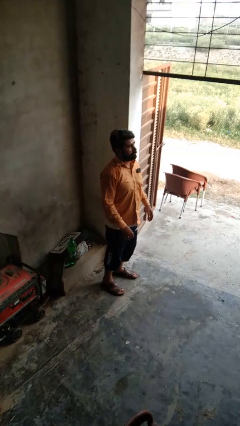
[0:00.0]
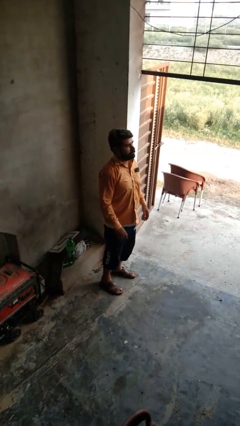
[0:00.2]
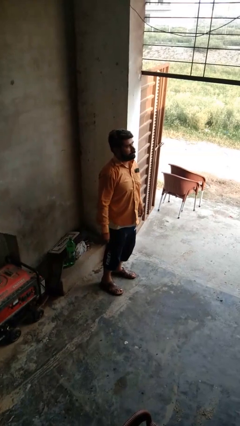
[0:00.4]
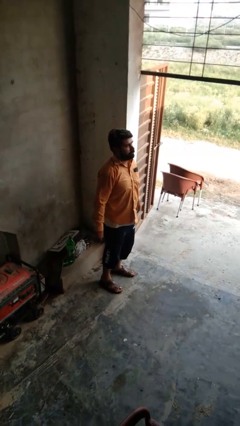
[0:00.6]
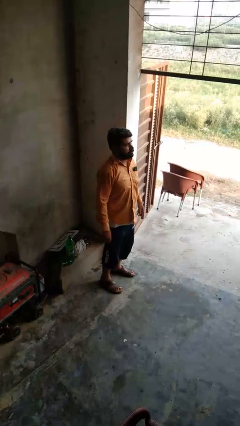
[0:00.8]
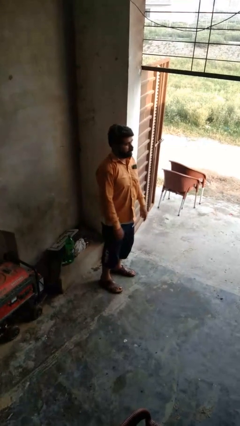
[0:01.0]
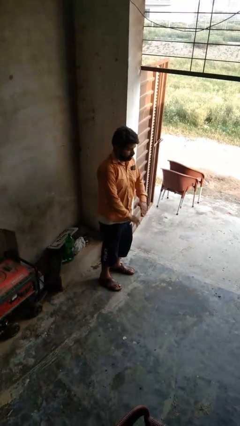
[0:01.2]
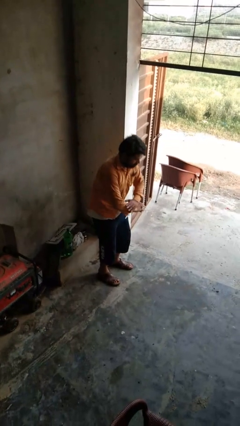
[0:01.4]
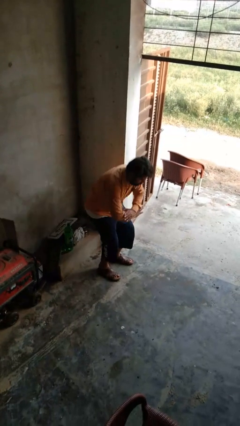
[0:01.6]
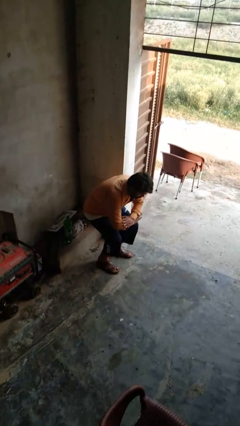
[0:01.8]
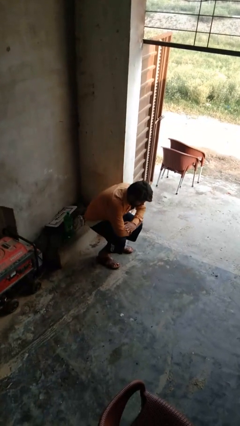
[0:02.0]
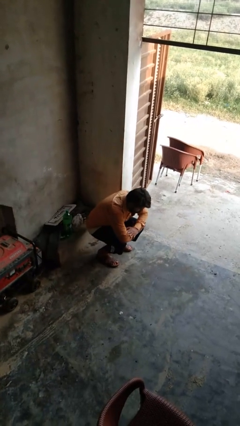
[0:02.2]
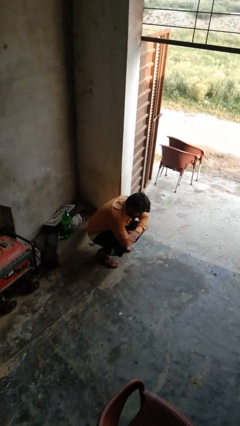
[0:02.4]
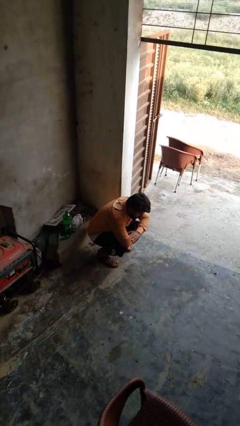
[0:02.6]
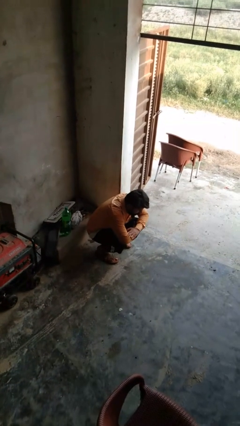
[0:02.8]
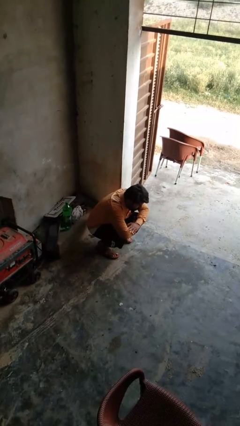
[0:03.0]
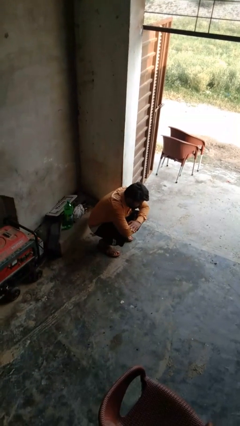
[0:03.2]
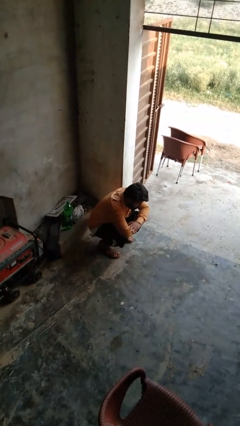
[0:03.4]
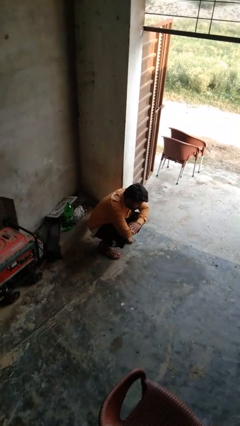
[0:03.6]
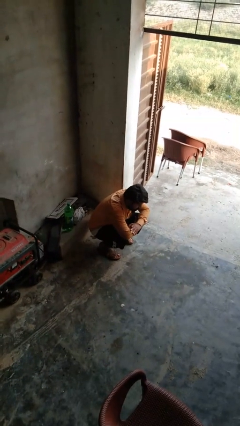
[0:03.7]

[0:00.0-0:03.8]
person squats

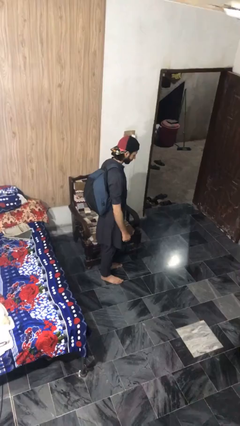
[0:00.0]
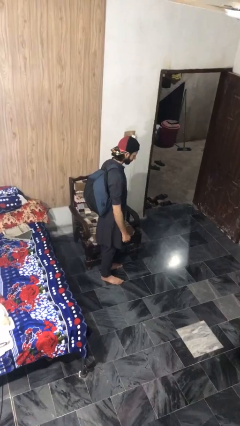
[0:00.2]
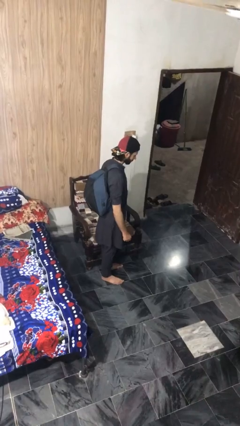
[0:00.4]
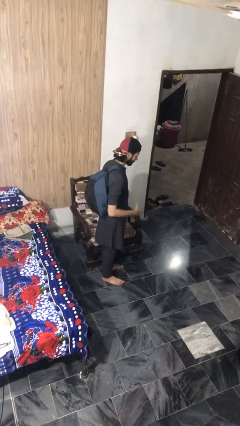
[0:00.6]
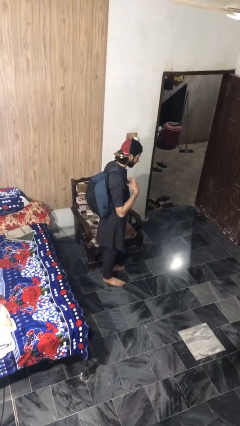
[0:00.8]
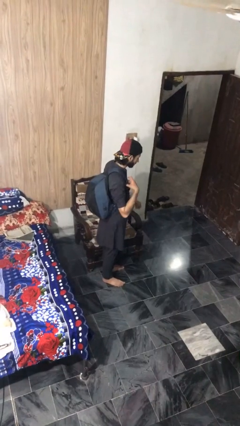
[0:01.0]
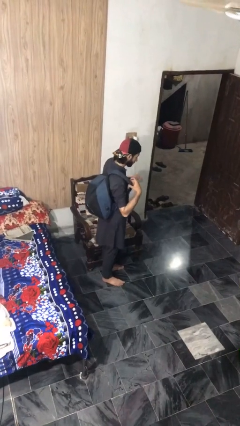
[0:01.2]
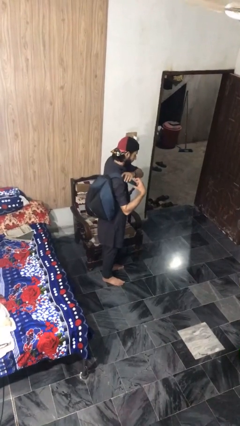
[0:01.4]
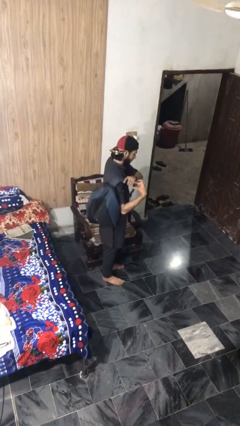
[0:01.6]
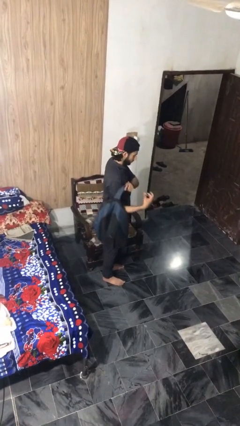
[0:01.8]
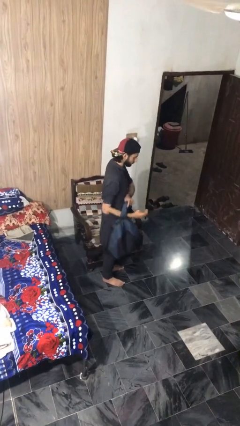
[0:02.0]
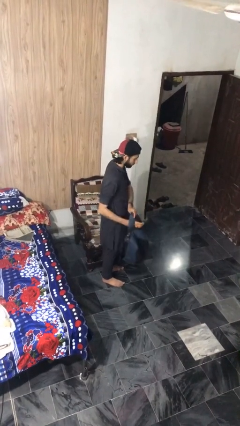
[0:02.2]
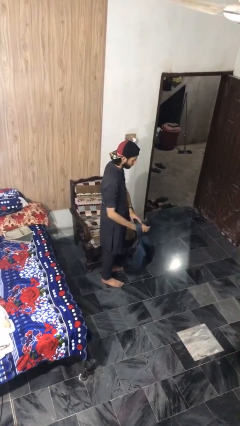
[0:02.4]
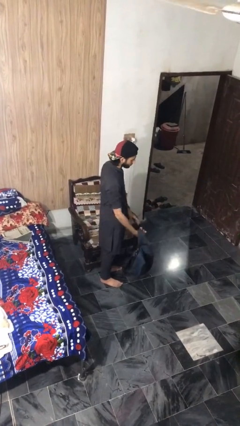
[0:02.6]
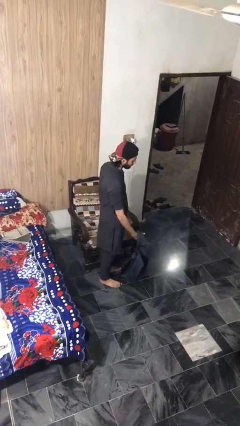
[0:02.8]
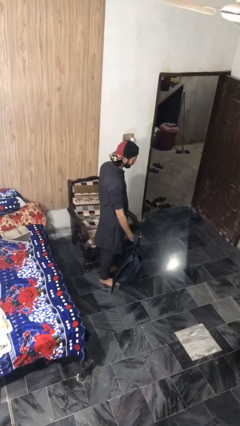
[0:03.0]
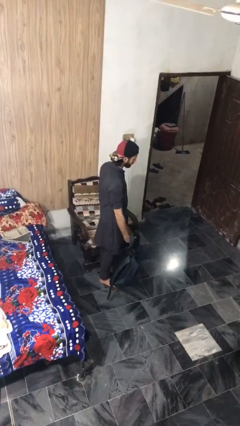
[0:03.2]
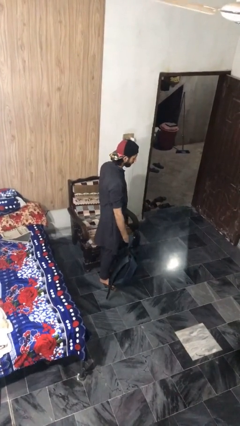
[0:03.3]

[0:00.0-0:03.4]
person takes off backpack

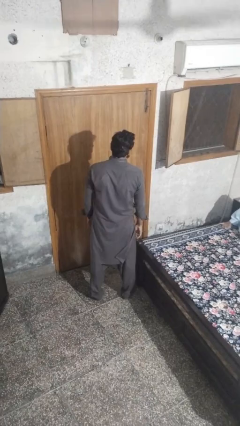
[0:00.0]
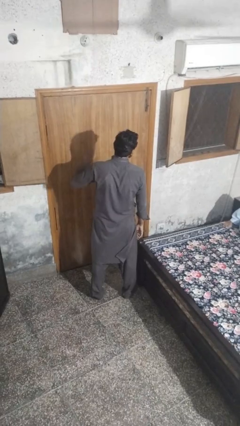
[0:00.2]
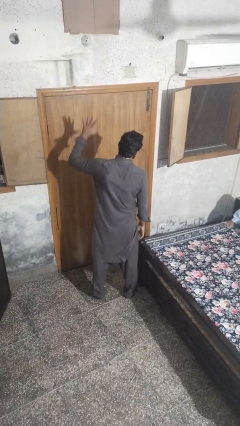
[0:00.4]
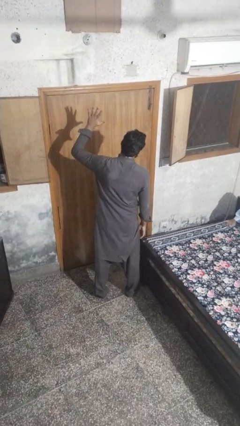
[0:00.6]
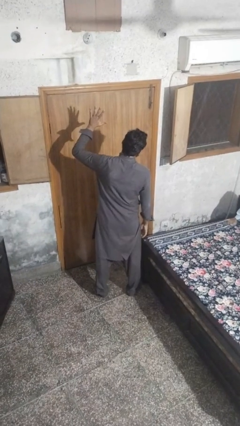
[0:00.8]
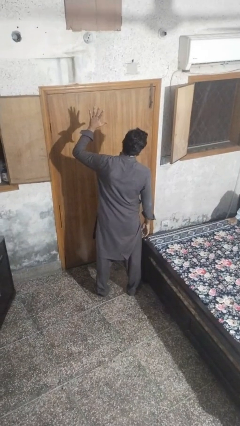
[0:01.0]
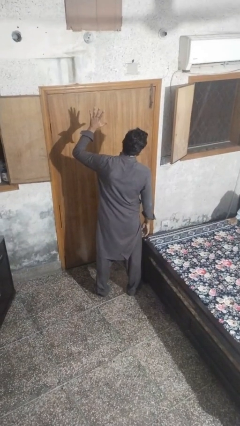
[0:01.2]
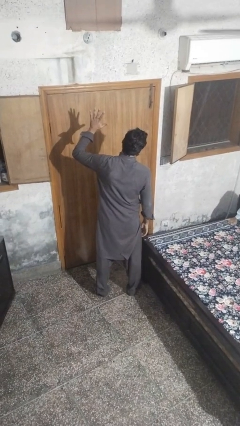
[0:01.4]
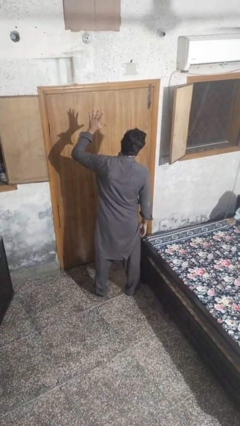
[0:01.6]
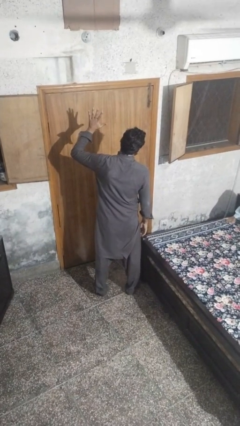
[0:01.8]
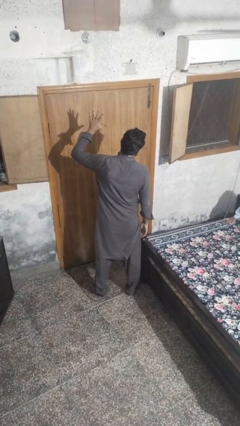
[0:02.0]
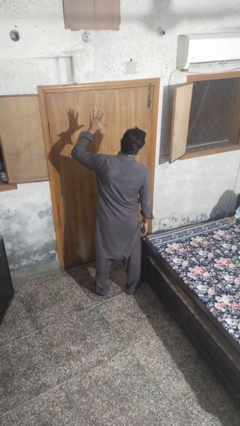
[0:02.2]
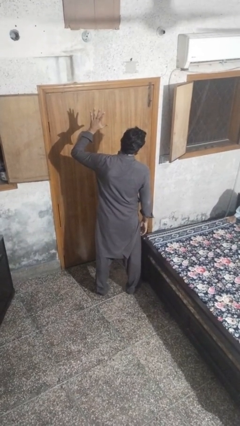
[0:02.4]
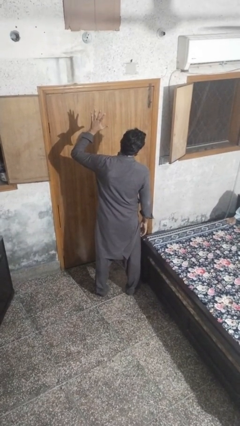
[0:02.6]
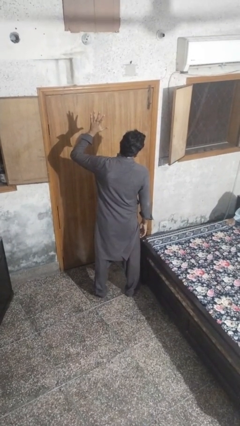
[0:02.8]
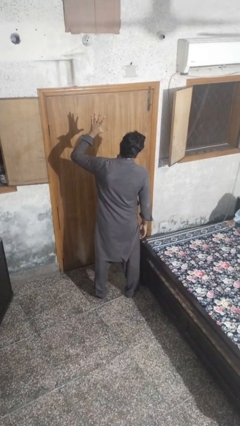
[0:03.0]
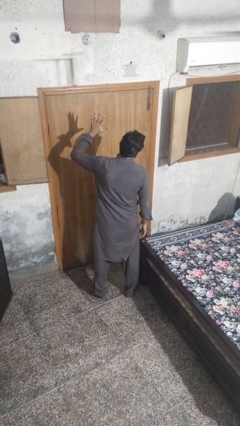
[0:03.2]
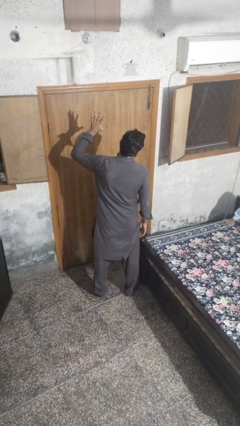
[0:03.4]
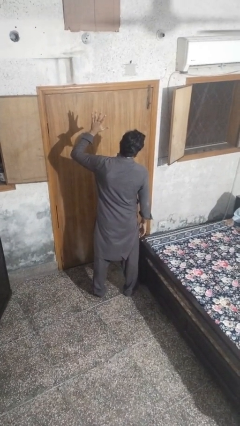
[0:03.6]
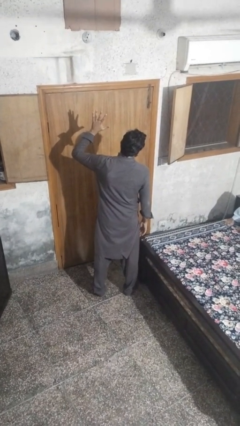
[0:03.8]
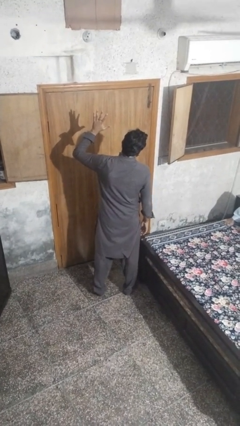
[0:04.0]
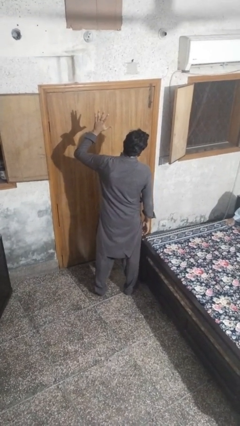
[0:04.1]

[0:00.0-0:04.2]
person gestures number five

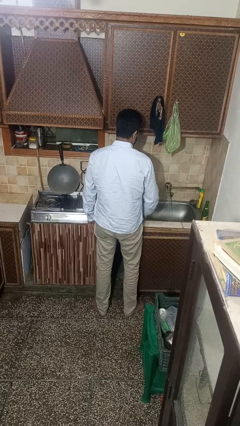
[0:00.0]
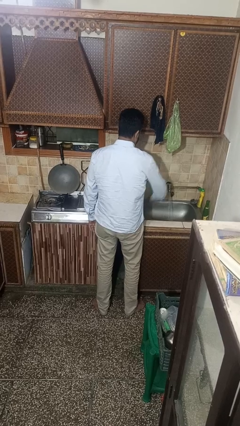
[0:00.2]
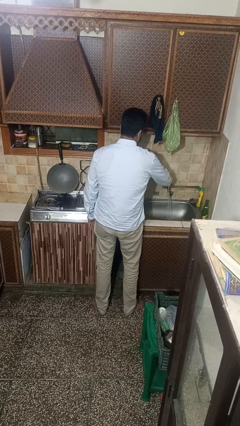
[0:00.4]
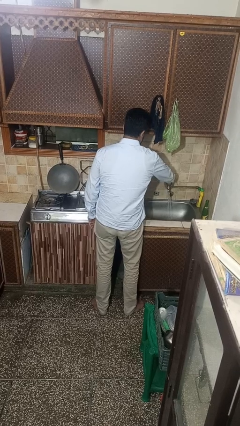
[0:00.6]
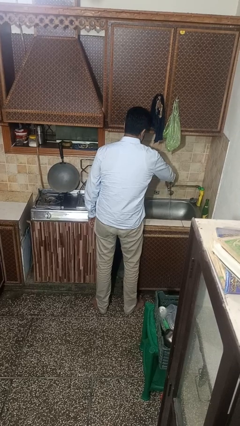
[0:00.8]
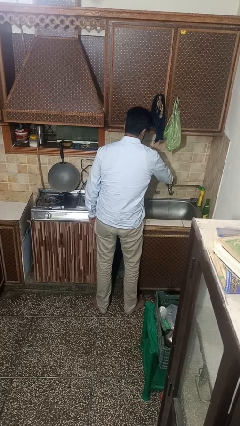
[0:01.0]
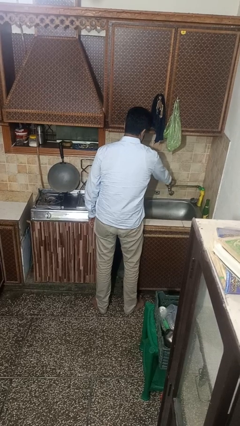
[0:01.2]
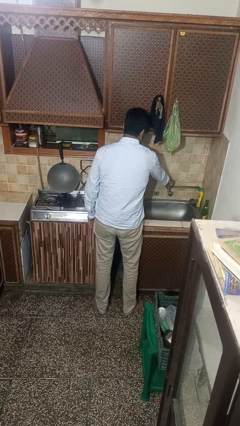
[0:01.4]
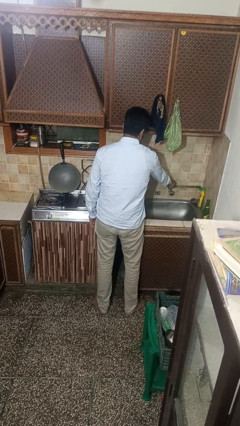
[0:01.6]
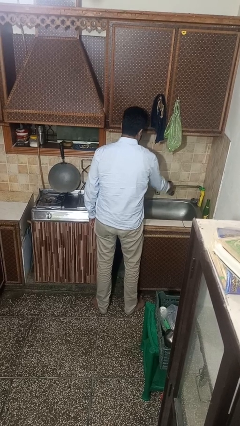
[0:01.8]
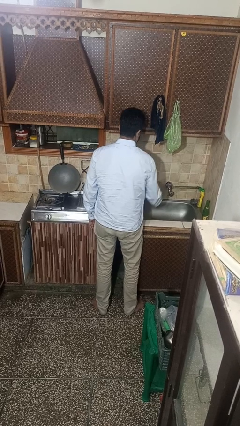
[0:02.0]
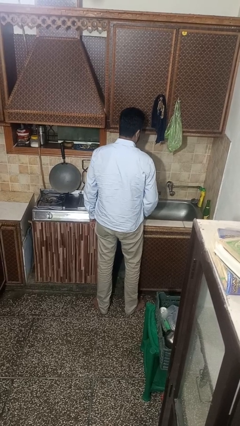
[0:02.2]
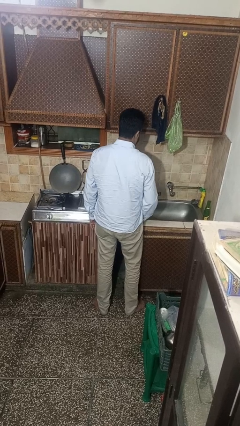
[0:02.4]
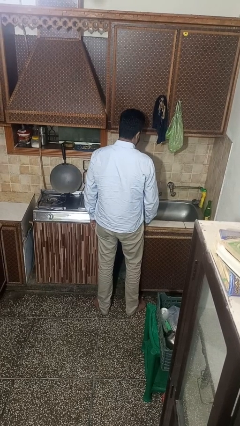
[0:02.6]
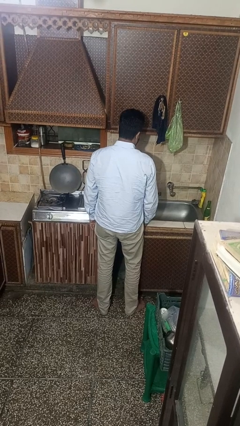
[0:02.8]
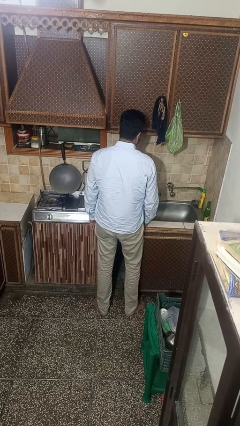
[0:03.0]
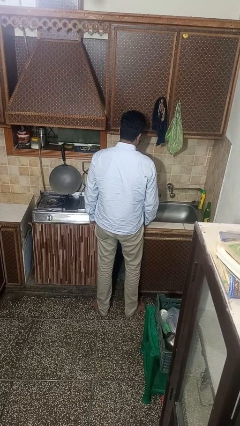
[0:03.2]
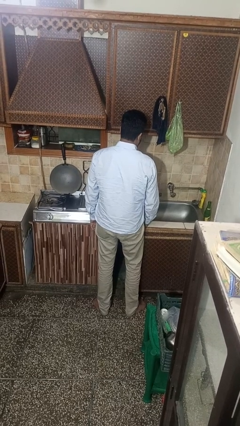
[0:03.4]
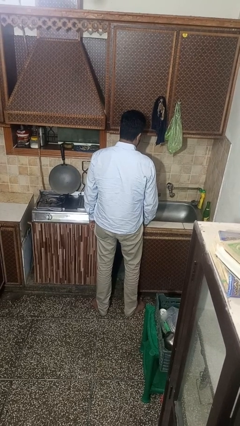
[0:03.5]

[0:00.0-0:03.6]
person turns off faucet

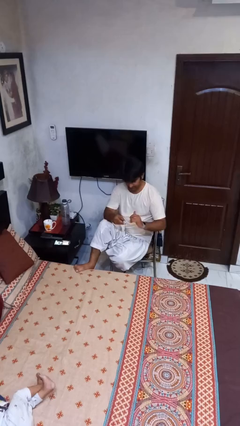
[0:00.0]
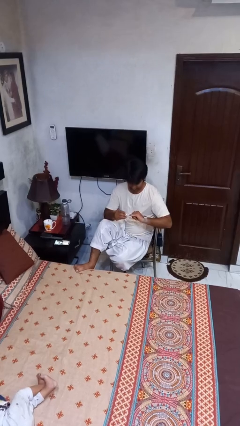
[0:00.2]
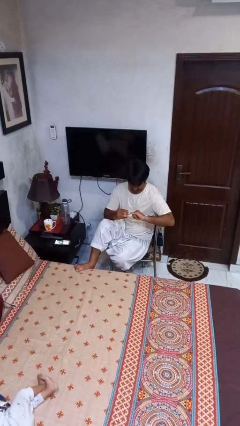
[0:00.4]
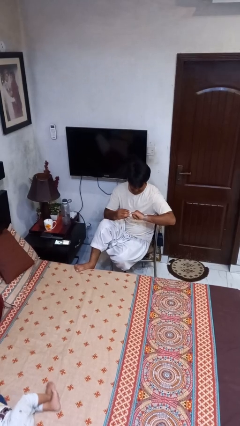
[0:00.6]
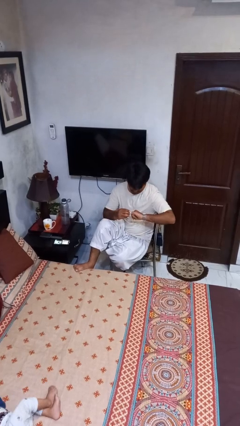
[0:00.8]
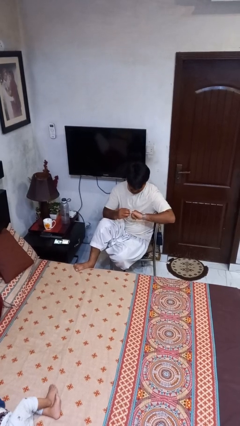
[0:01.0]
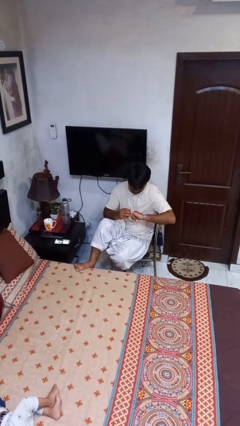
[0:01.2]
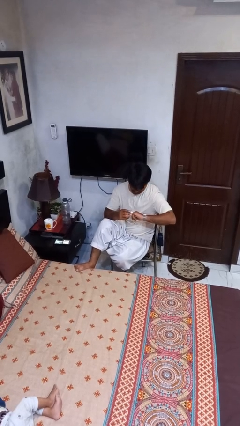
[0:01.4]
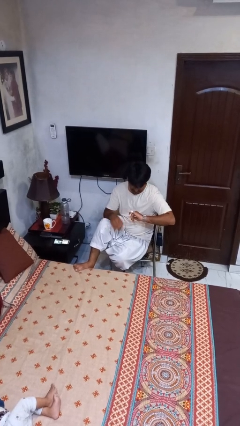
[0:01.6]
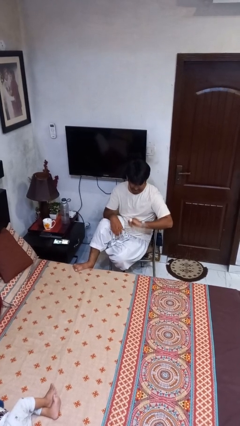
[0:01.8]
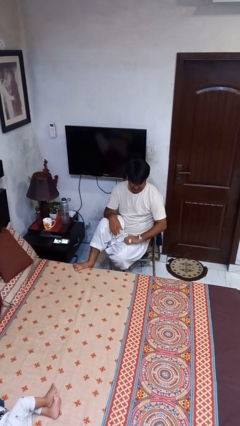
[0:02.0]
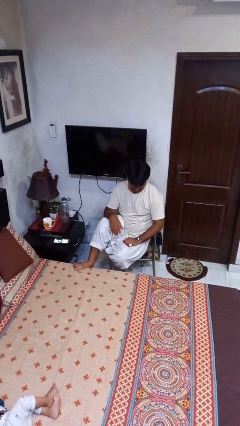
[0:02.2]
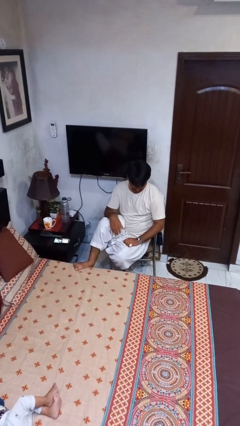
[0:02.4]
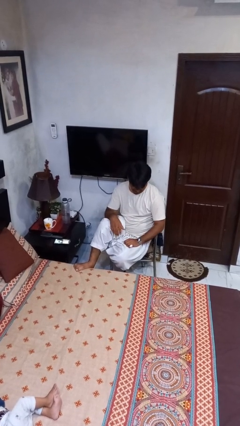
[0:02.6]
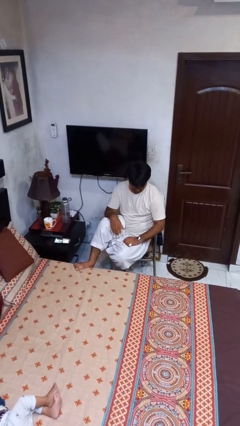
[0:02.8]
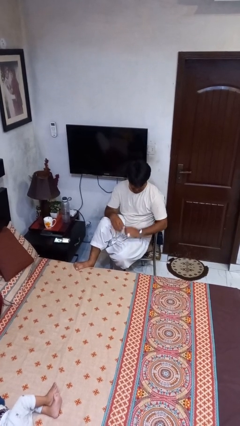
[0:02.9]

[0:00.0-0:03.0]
person puts on ring
